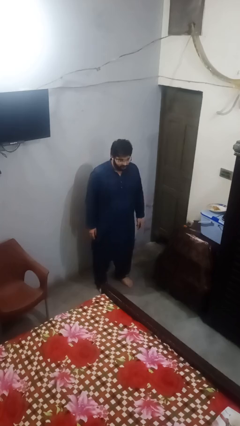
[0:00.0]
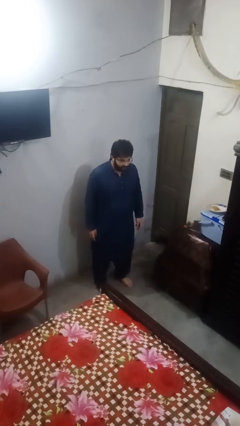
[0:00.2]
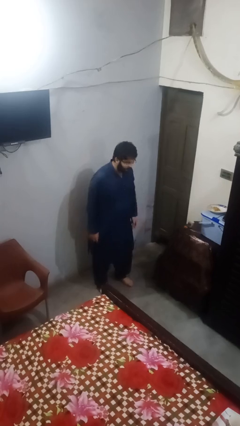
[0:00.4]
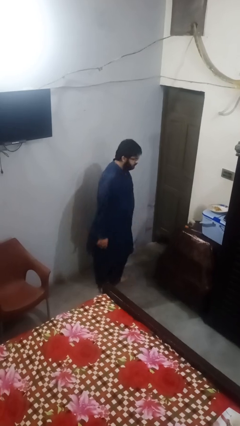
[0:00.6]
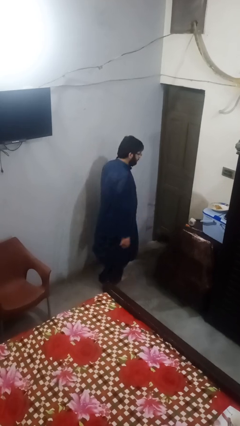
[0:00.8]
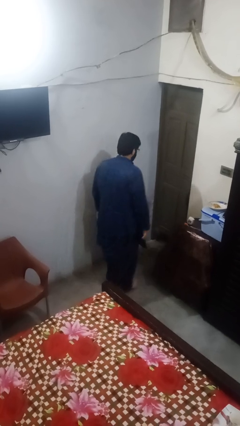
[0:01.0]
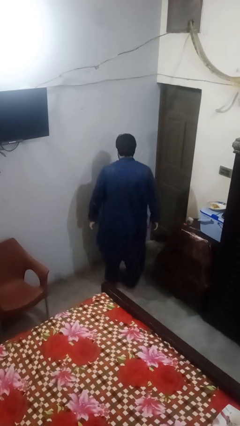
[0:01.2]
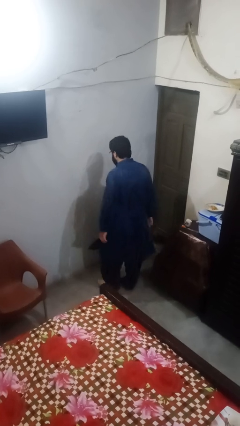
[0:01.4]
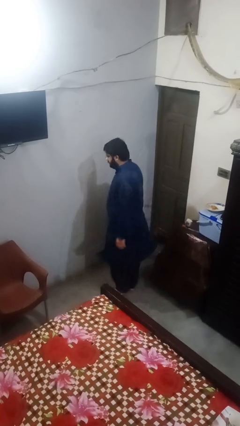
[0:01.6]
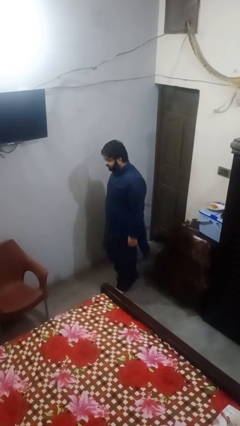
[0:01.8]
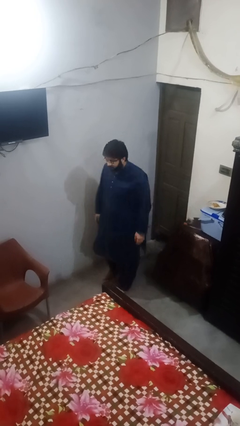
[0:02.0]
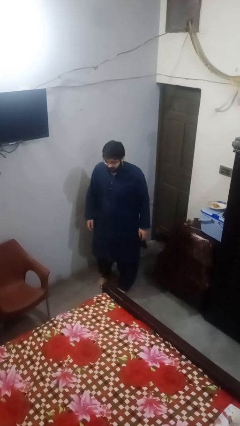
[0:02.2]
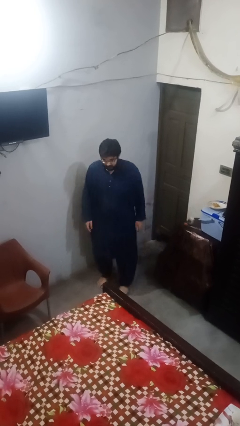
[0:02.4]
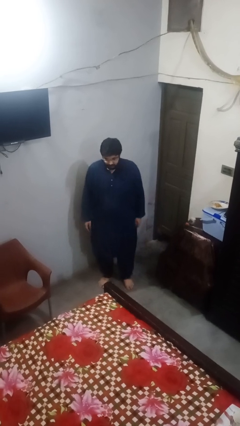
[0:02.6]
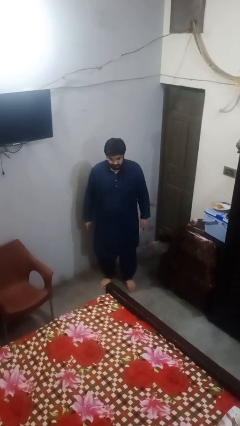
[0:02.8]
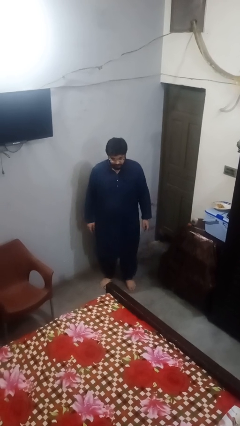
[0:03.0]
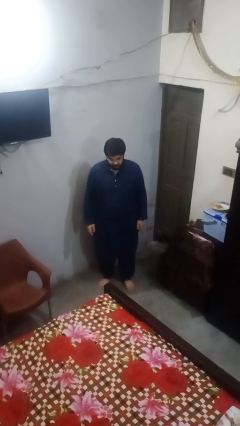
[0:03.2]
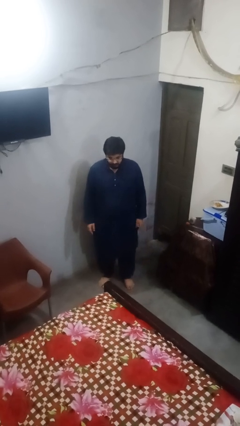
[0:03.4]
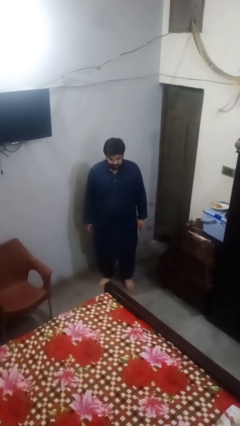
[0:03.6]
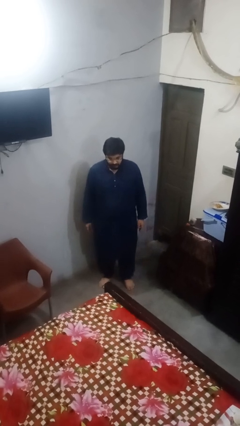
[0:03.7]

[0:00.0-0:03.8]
person twirls

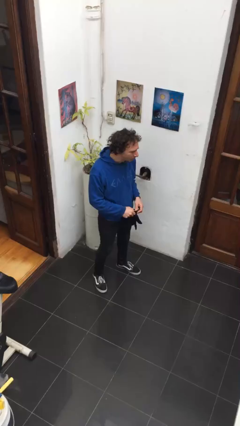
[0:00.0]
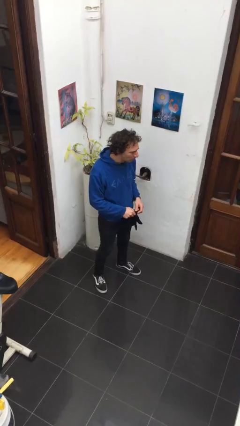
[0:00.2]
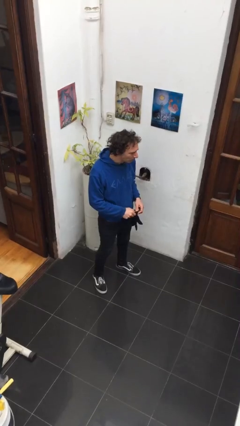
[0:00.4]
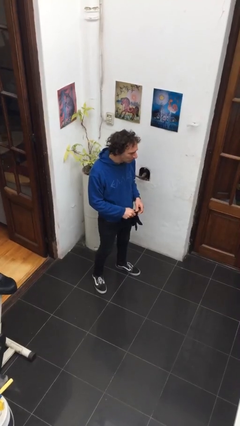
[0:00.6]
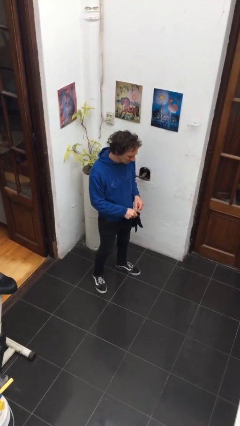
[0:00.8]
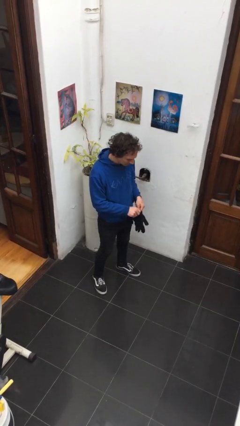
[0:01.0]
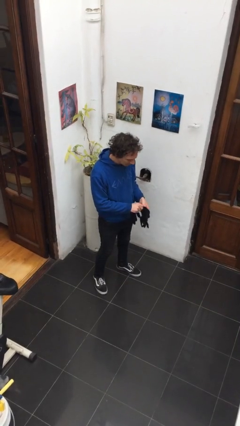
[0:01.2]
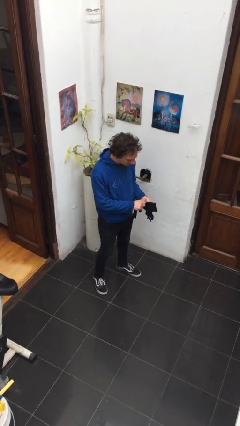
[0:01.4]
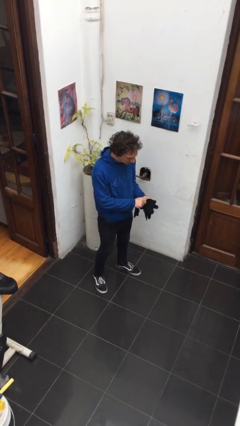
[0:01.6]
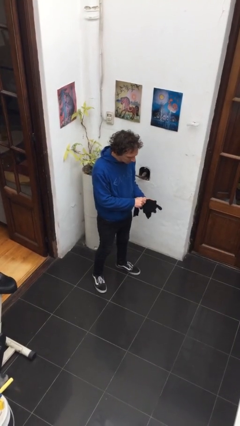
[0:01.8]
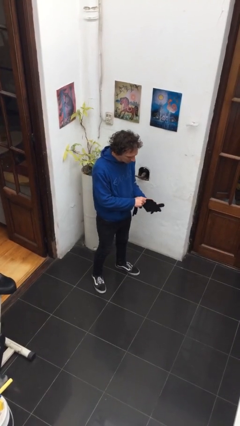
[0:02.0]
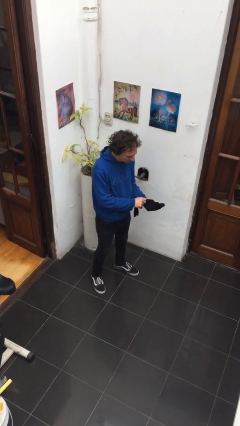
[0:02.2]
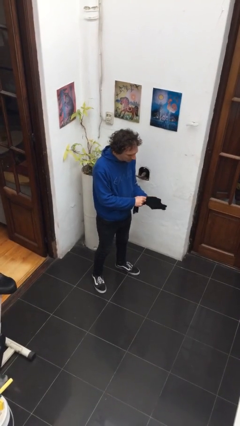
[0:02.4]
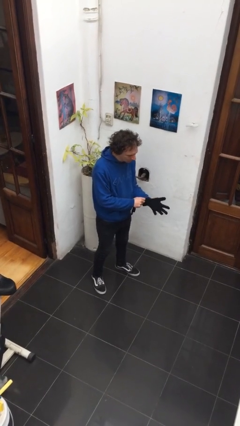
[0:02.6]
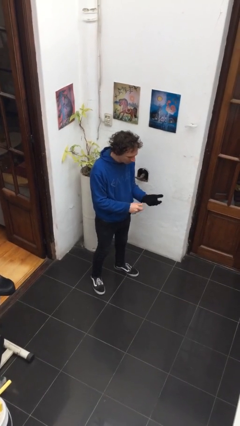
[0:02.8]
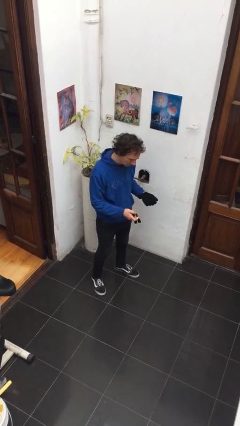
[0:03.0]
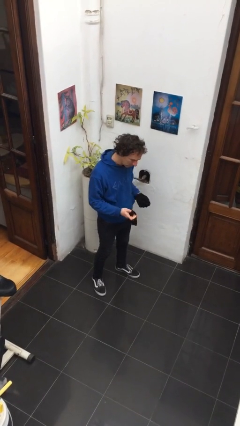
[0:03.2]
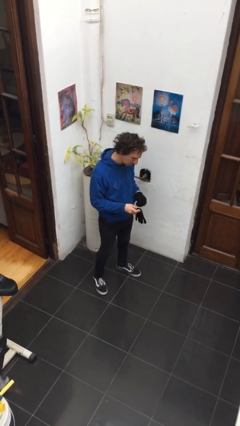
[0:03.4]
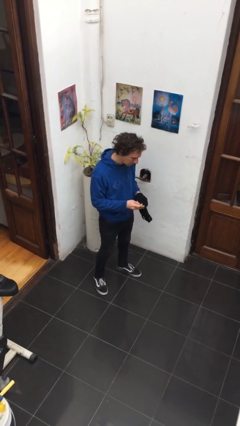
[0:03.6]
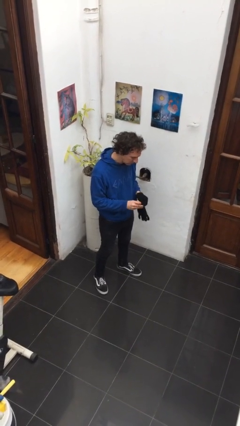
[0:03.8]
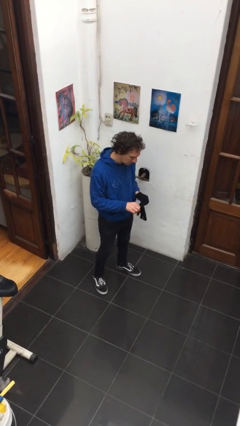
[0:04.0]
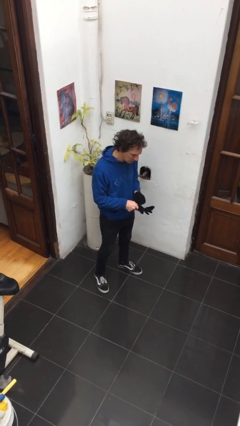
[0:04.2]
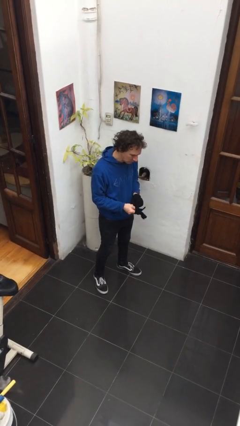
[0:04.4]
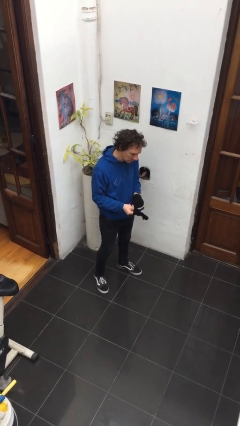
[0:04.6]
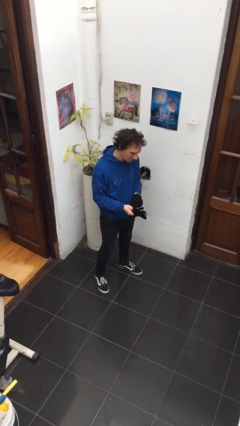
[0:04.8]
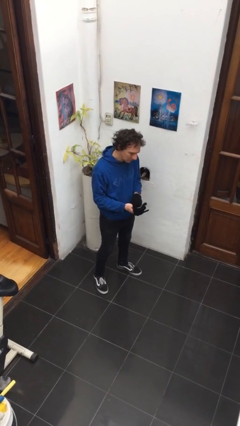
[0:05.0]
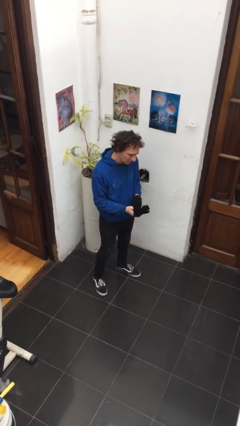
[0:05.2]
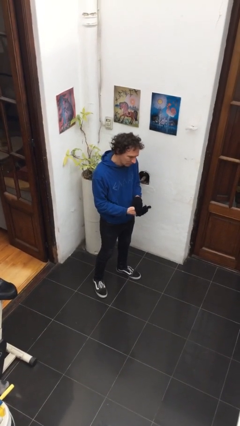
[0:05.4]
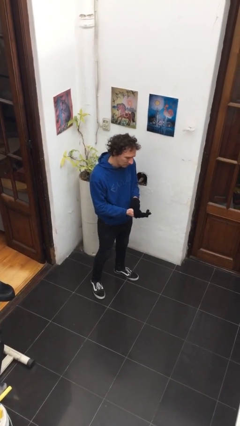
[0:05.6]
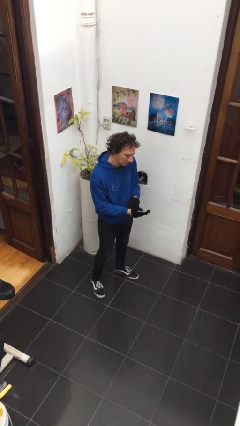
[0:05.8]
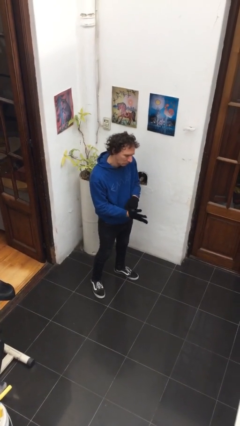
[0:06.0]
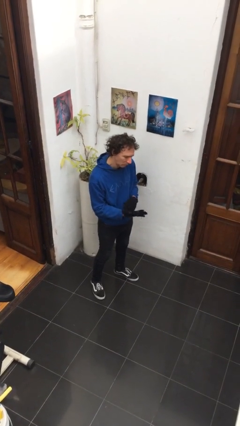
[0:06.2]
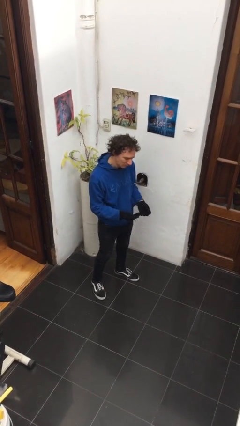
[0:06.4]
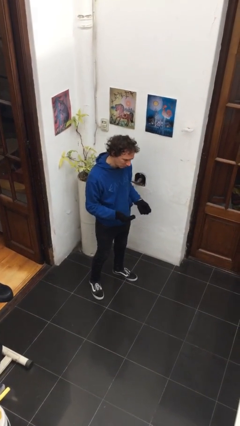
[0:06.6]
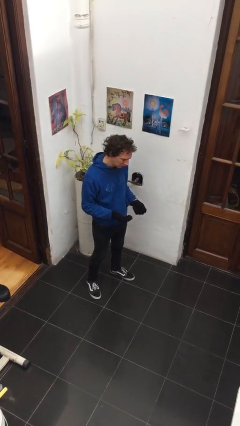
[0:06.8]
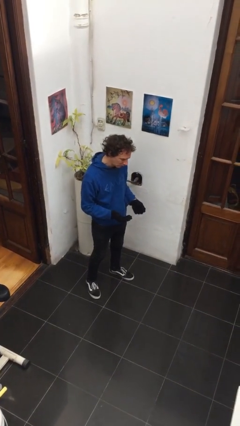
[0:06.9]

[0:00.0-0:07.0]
person puts on gloves

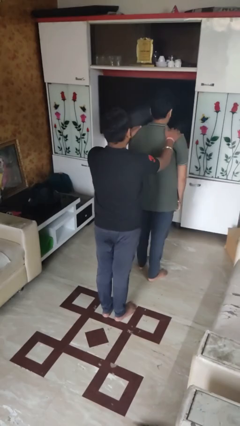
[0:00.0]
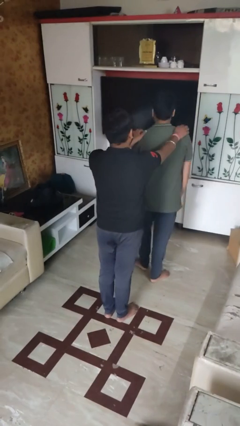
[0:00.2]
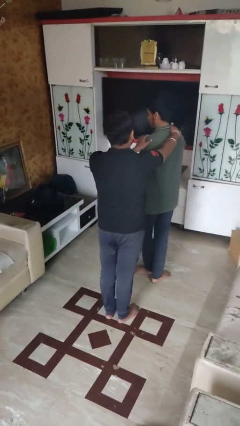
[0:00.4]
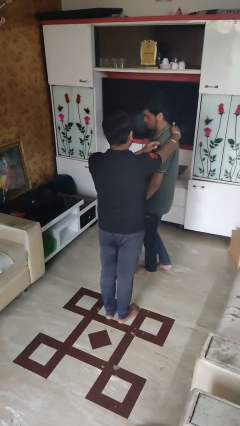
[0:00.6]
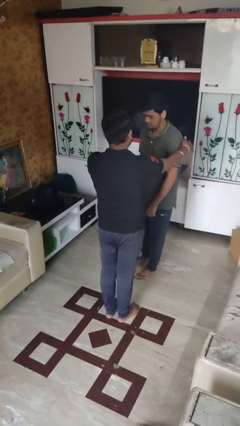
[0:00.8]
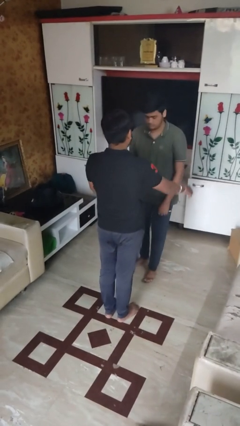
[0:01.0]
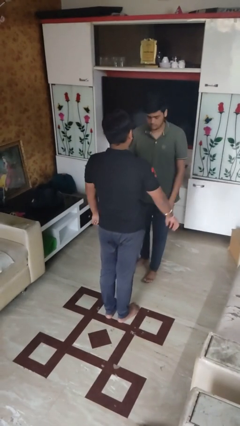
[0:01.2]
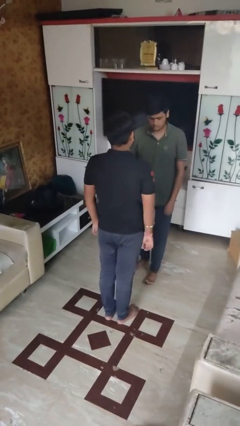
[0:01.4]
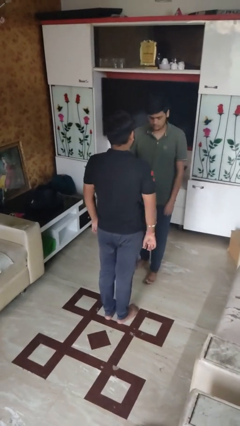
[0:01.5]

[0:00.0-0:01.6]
person spins person around

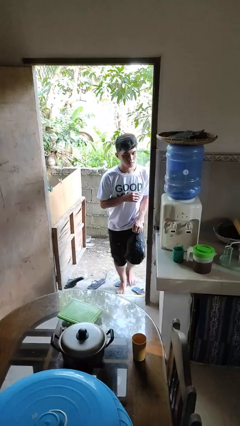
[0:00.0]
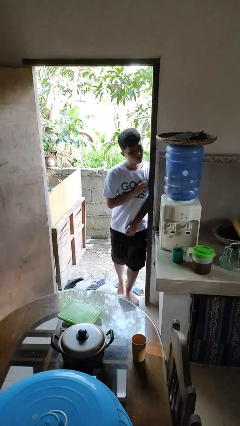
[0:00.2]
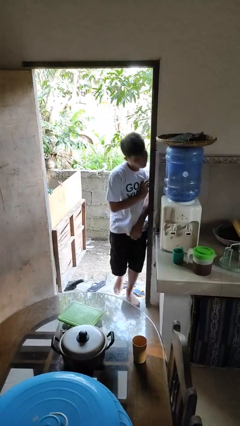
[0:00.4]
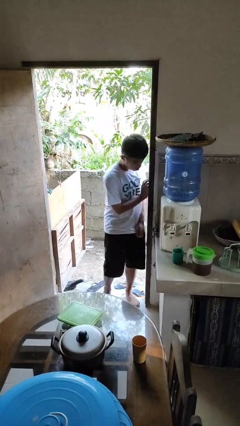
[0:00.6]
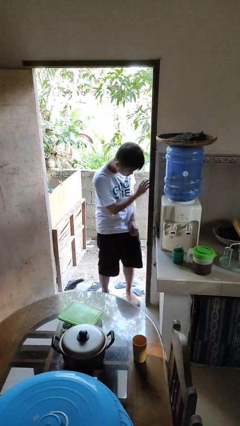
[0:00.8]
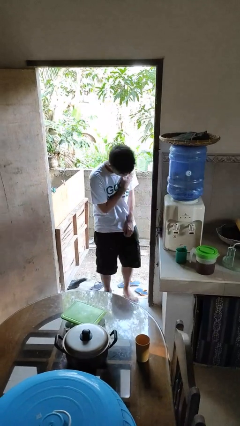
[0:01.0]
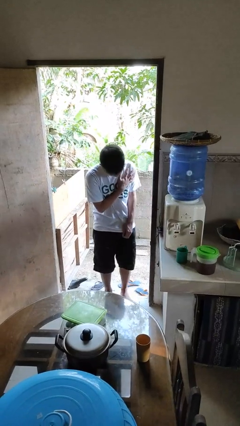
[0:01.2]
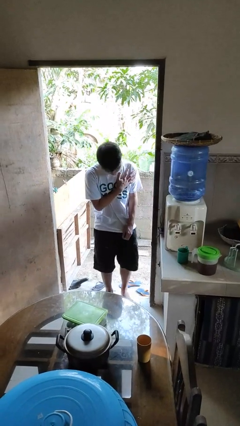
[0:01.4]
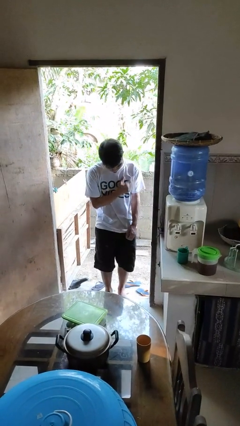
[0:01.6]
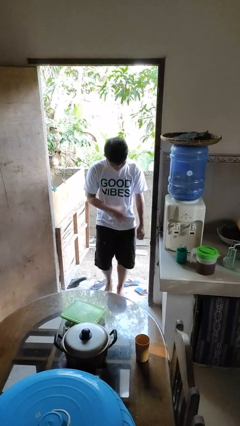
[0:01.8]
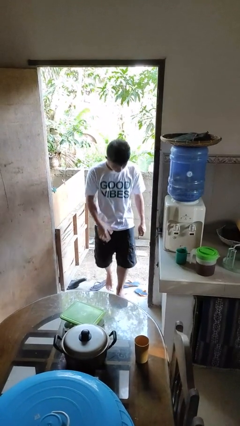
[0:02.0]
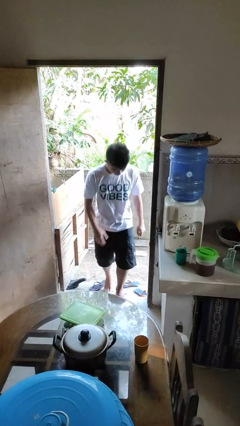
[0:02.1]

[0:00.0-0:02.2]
person bumps into wall

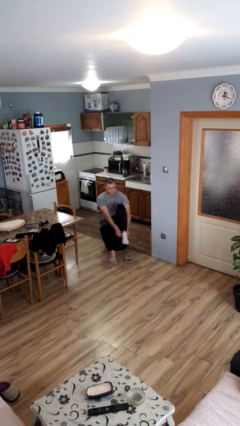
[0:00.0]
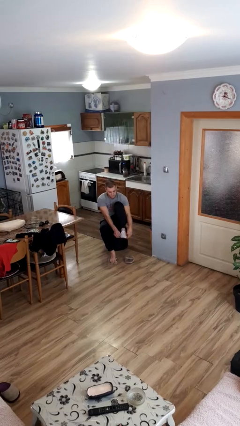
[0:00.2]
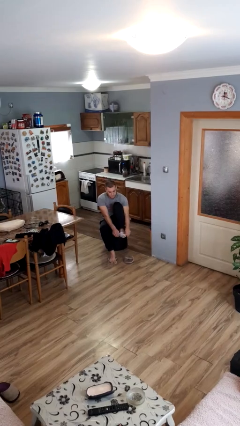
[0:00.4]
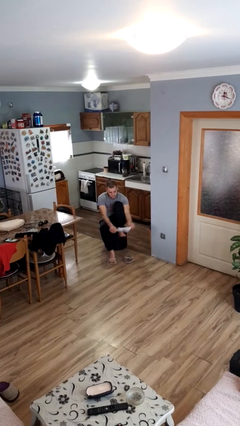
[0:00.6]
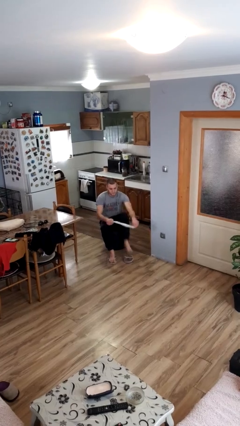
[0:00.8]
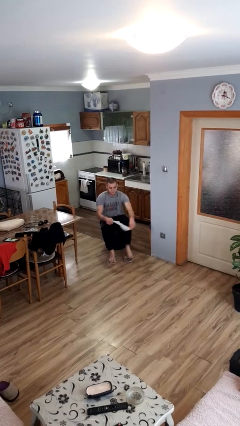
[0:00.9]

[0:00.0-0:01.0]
person takes off socks

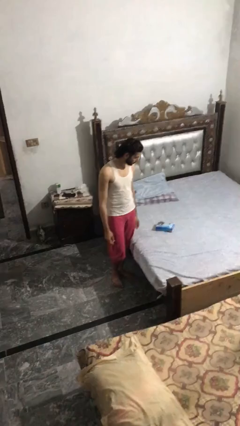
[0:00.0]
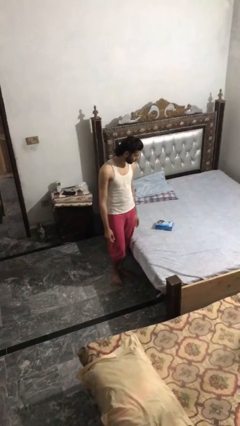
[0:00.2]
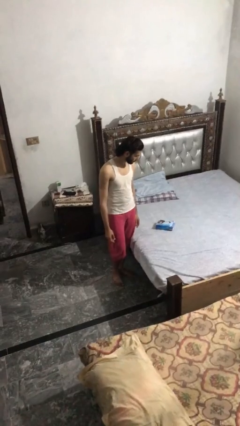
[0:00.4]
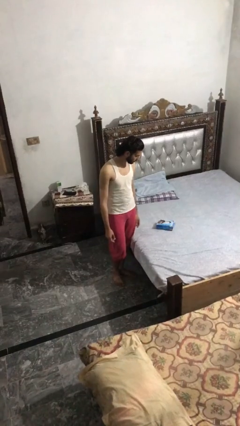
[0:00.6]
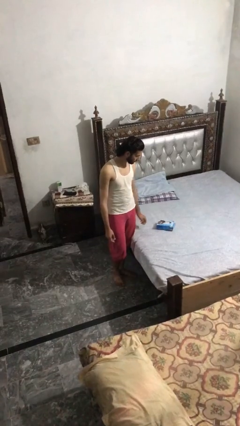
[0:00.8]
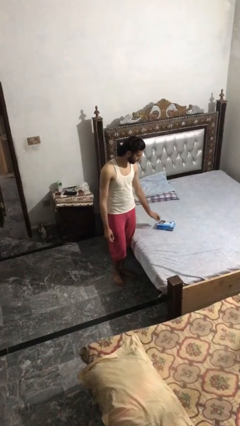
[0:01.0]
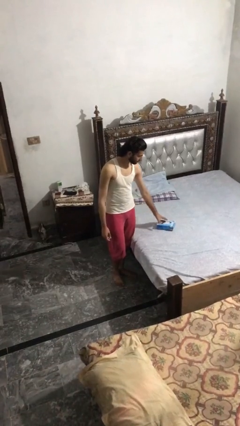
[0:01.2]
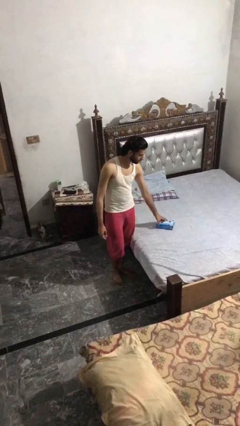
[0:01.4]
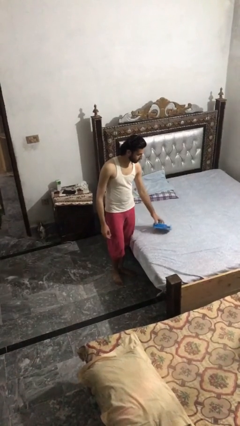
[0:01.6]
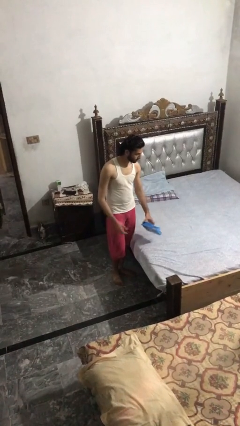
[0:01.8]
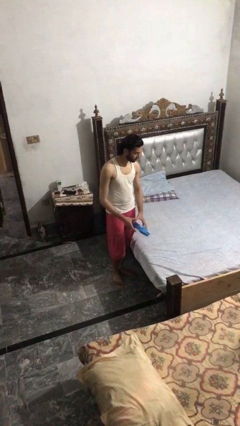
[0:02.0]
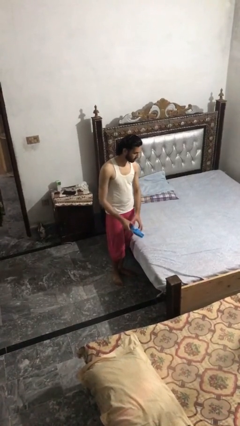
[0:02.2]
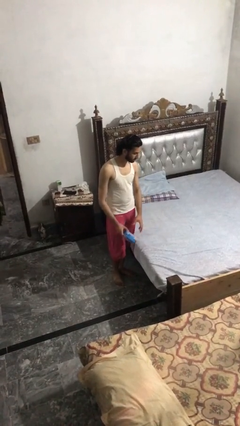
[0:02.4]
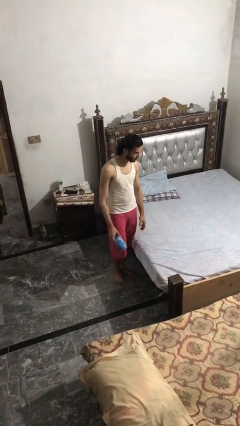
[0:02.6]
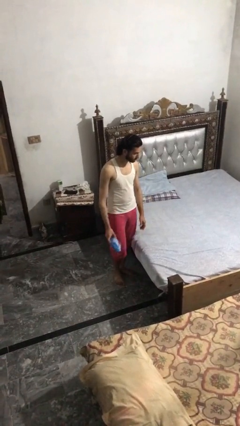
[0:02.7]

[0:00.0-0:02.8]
person picks up object from bed
